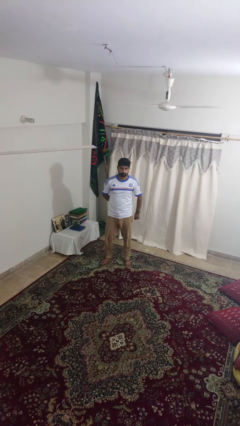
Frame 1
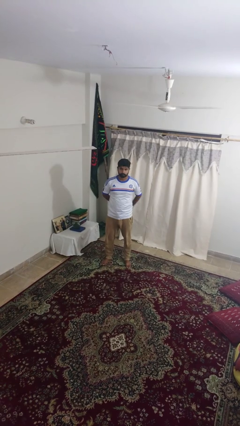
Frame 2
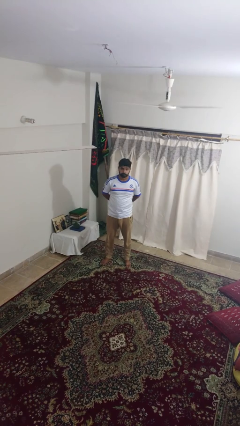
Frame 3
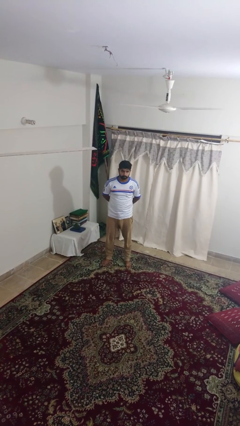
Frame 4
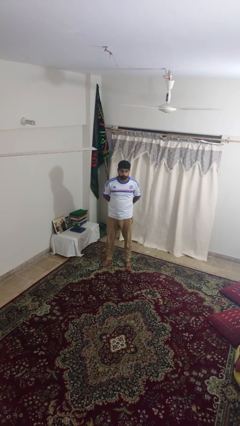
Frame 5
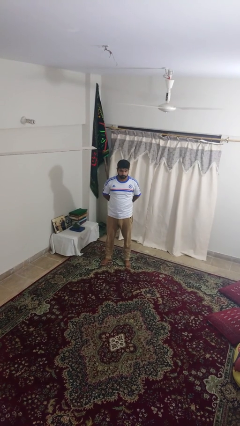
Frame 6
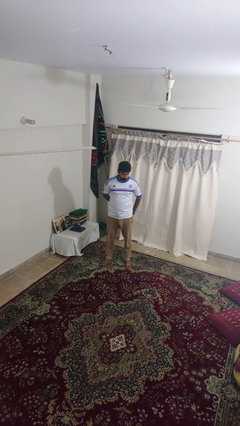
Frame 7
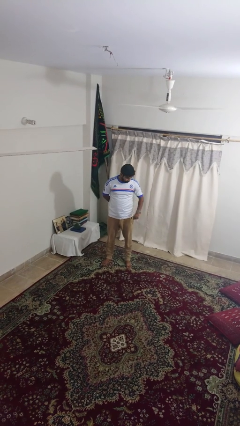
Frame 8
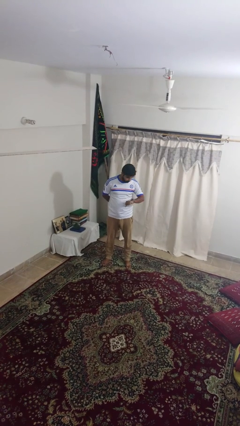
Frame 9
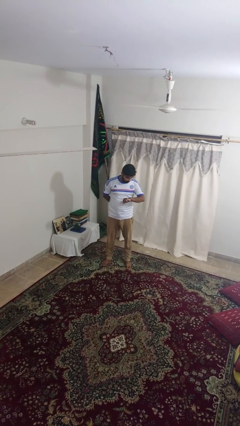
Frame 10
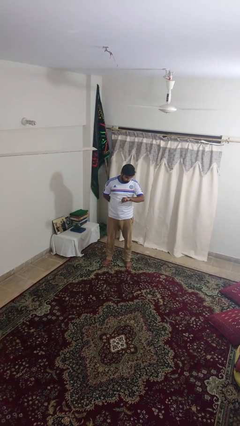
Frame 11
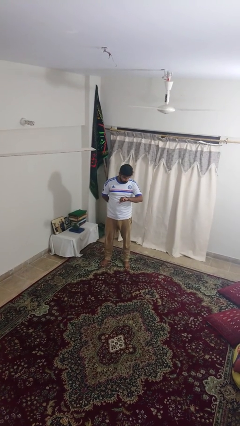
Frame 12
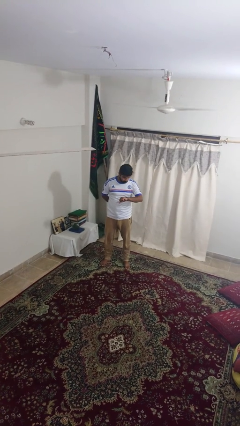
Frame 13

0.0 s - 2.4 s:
person looks at wristwatch

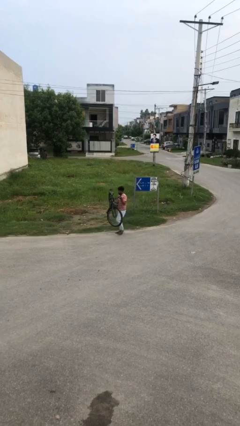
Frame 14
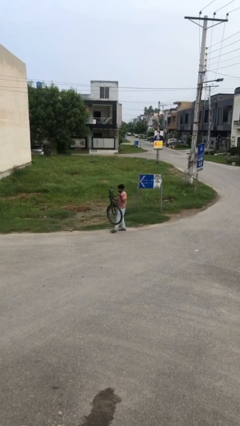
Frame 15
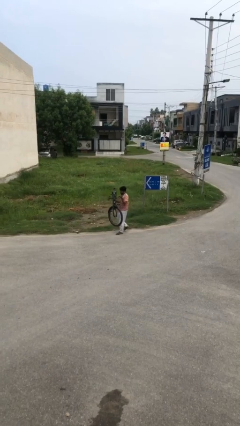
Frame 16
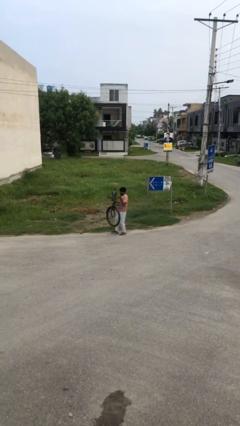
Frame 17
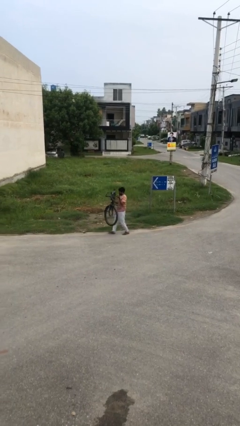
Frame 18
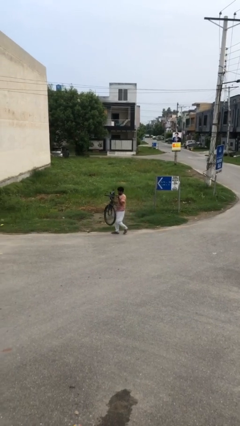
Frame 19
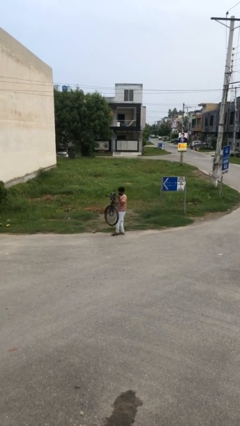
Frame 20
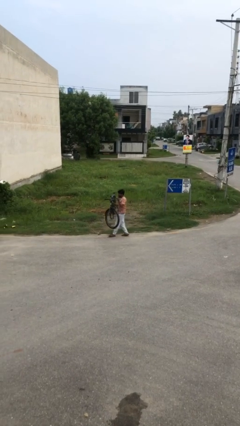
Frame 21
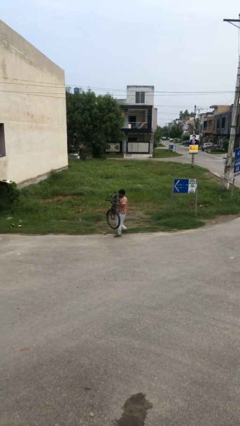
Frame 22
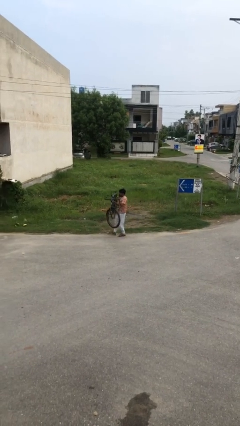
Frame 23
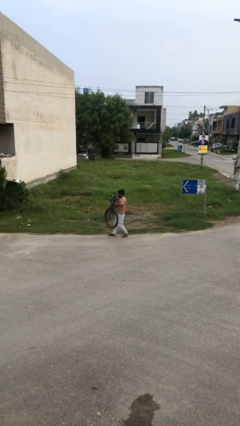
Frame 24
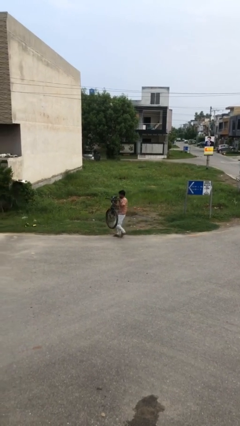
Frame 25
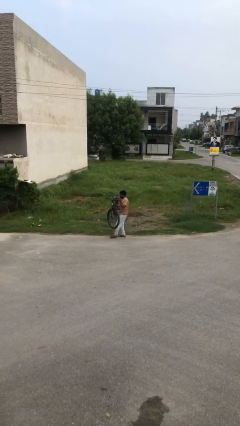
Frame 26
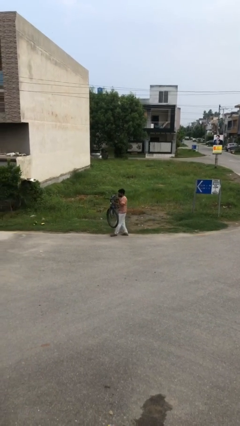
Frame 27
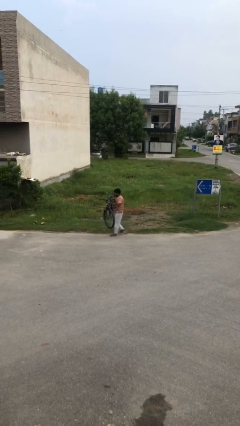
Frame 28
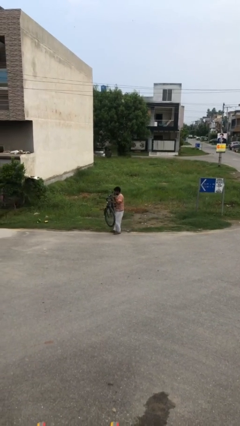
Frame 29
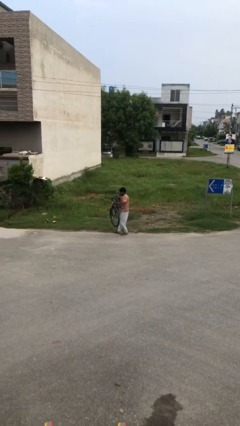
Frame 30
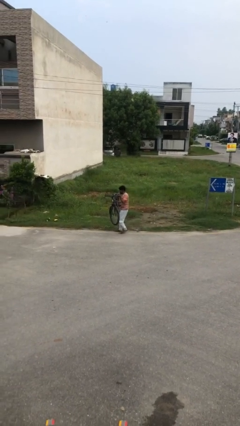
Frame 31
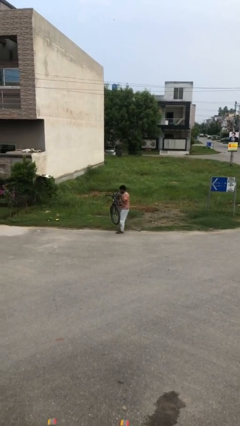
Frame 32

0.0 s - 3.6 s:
person carries heavy object

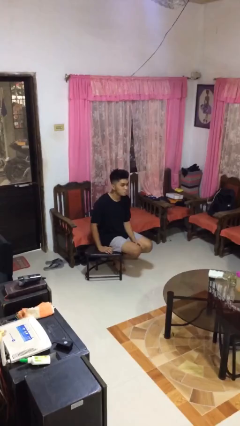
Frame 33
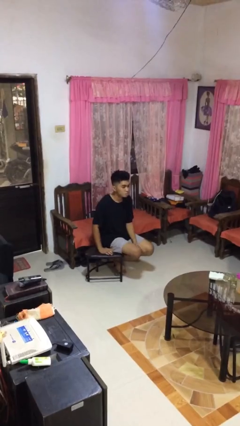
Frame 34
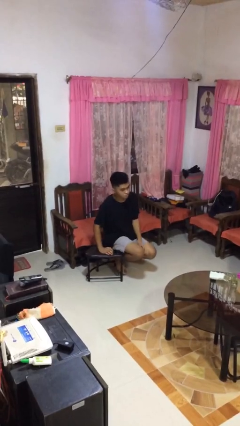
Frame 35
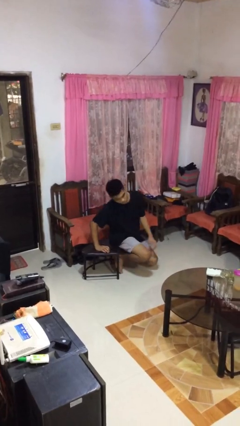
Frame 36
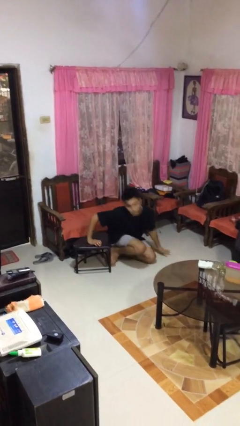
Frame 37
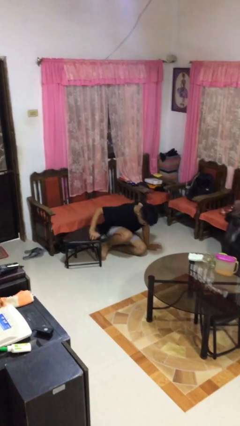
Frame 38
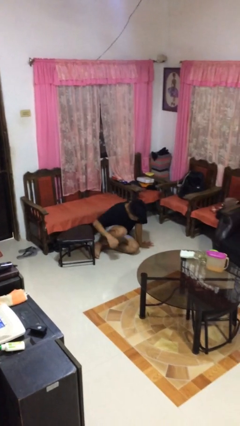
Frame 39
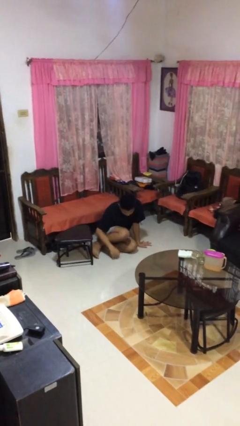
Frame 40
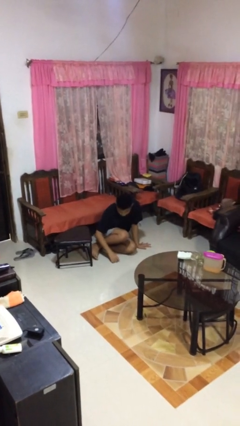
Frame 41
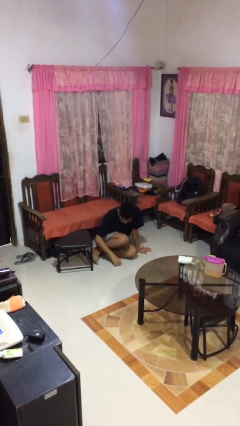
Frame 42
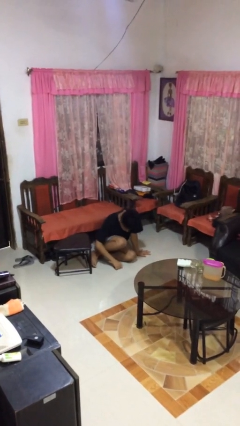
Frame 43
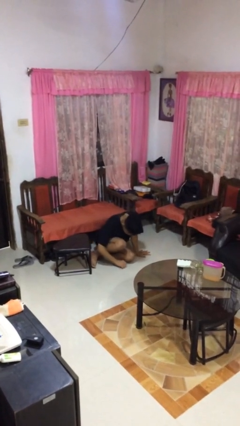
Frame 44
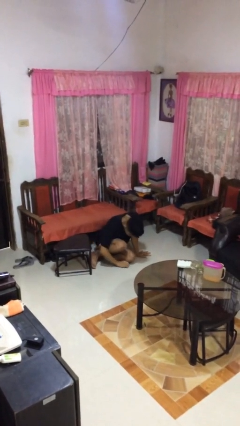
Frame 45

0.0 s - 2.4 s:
person falls from chair

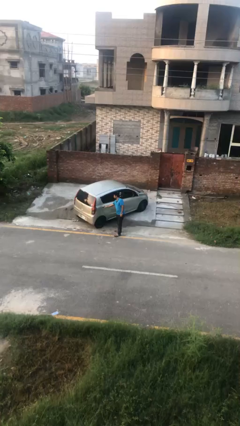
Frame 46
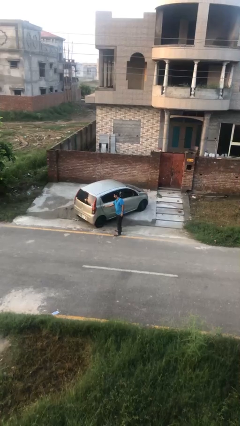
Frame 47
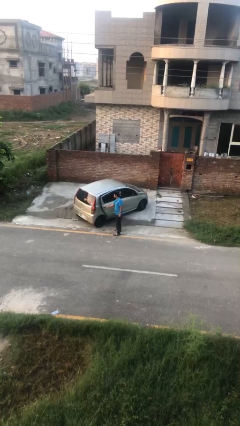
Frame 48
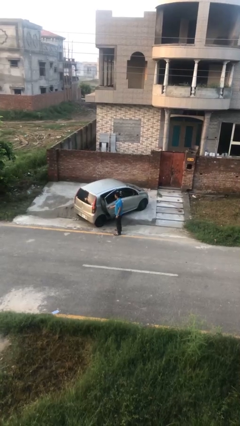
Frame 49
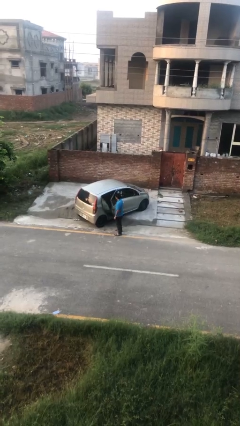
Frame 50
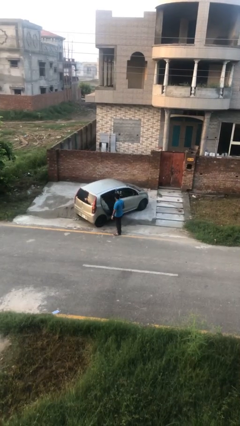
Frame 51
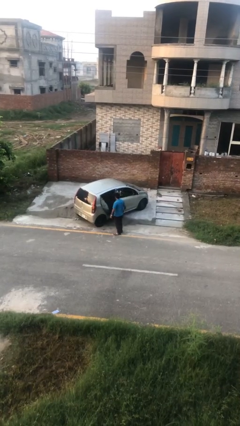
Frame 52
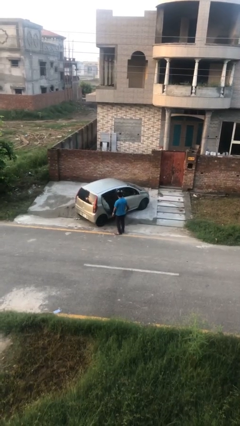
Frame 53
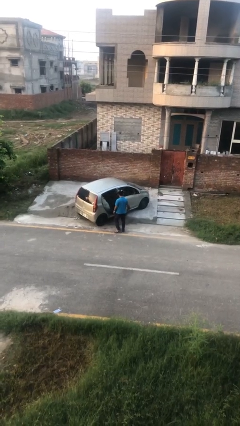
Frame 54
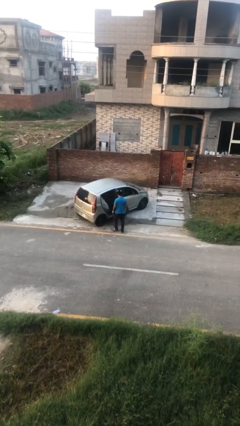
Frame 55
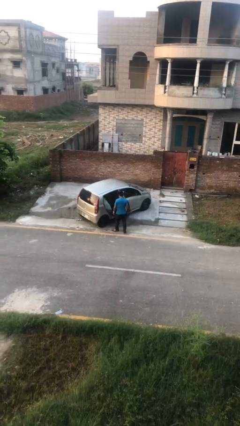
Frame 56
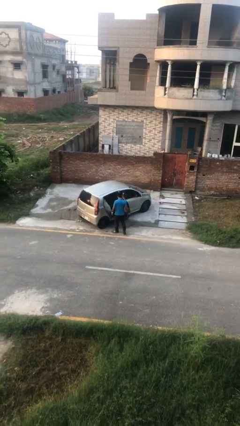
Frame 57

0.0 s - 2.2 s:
person opens car door

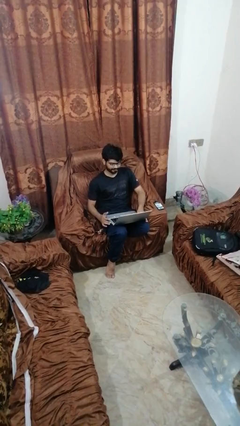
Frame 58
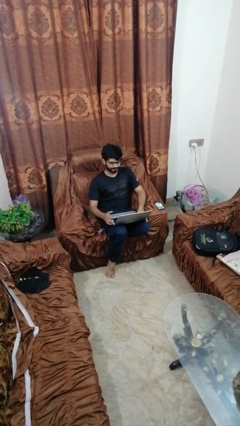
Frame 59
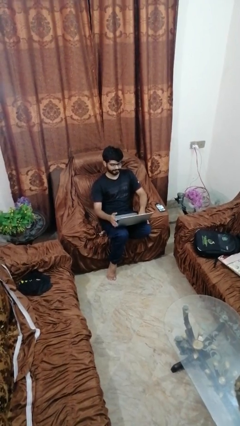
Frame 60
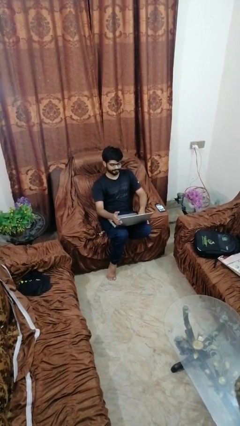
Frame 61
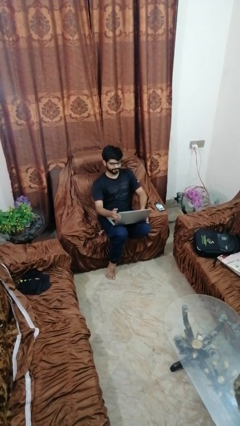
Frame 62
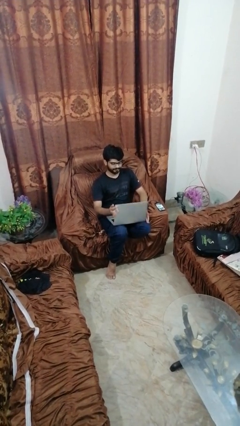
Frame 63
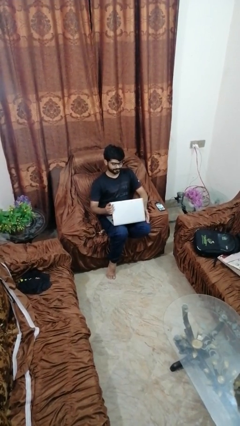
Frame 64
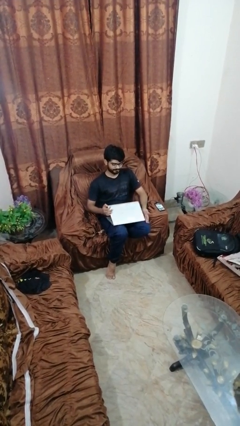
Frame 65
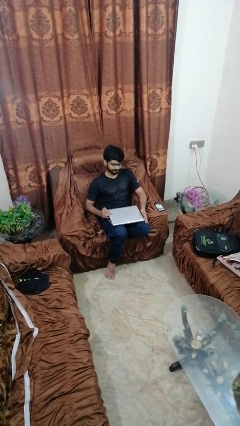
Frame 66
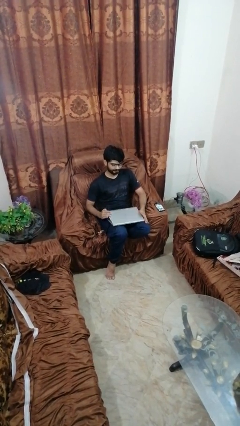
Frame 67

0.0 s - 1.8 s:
person closes laptop

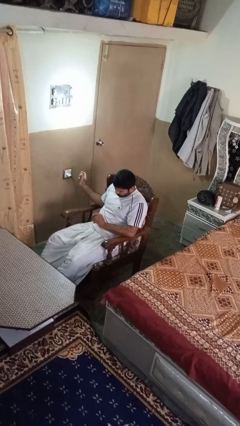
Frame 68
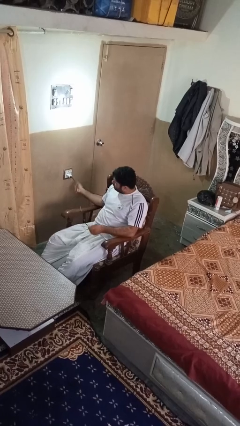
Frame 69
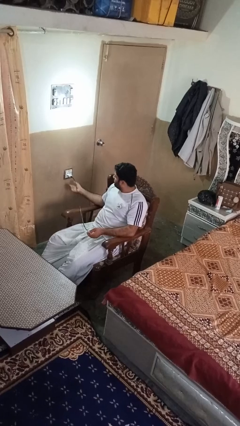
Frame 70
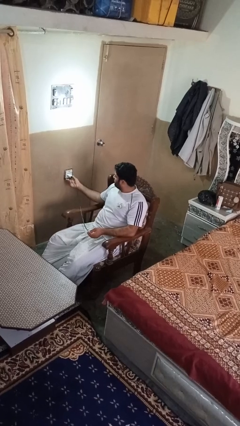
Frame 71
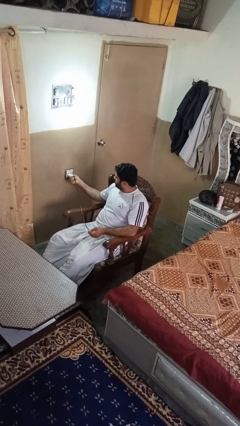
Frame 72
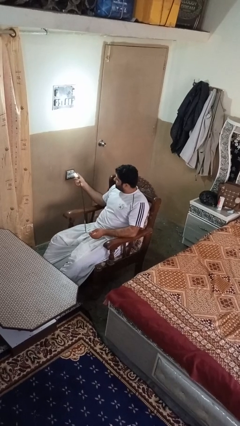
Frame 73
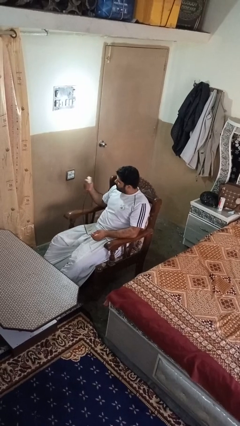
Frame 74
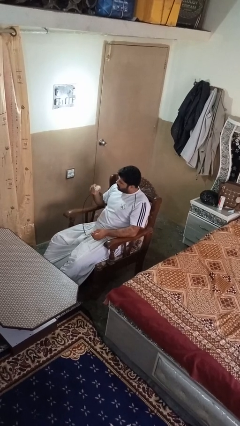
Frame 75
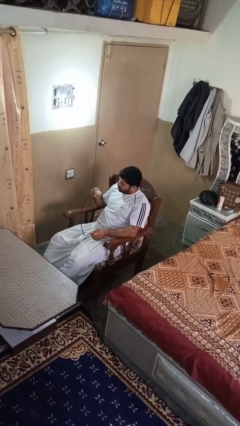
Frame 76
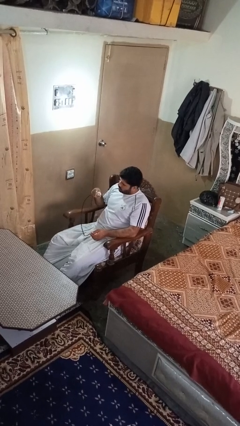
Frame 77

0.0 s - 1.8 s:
person unplugs from electrical socket

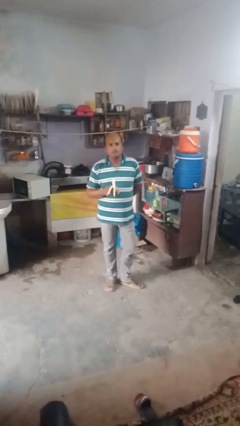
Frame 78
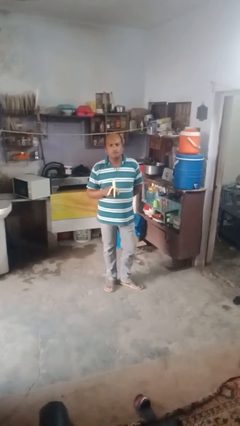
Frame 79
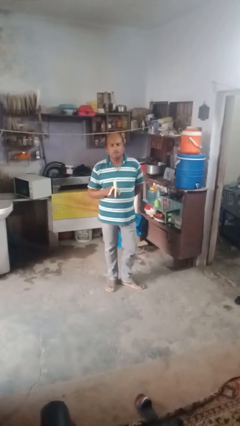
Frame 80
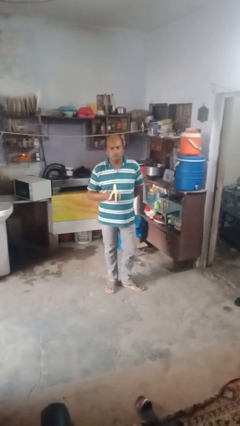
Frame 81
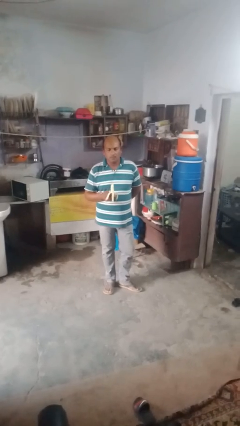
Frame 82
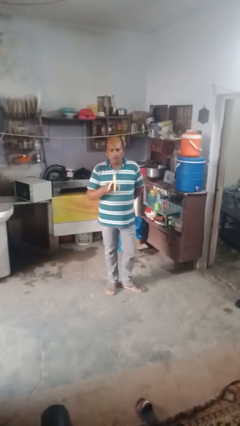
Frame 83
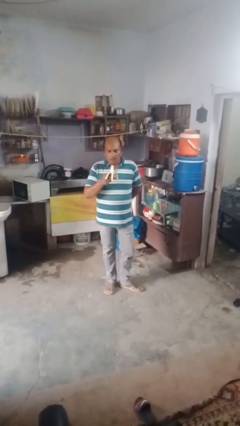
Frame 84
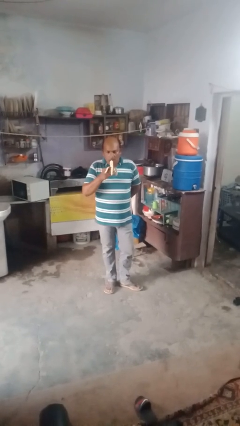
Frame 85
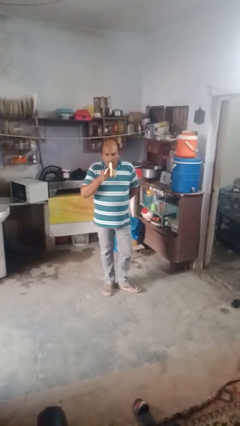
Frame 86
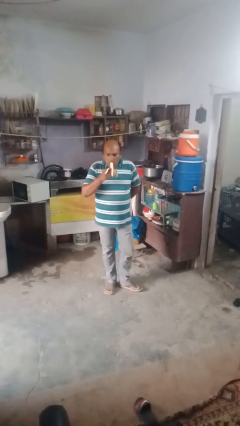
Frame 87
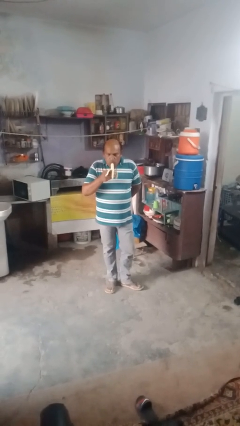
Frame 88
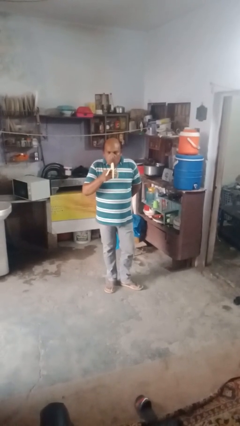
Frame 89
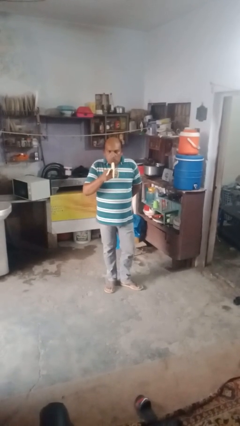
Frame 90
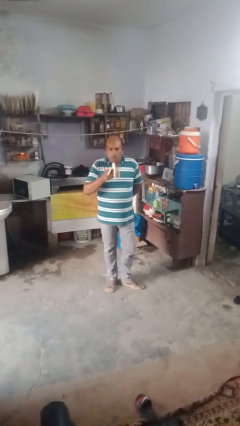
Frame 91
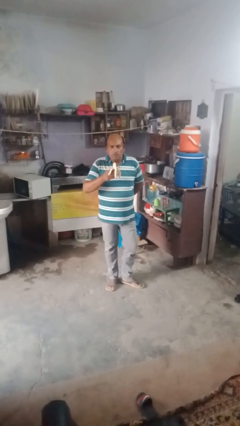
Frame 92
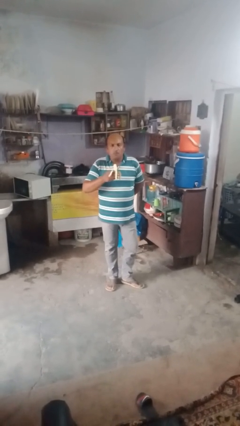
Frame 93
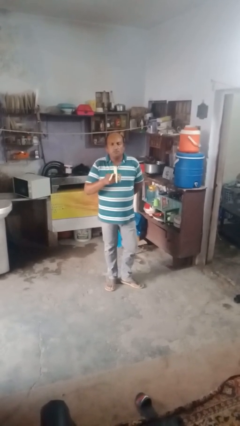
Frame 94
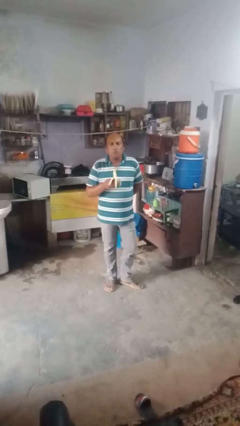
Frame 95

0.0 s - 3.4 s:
person eats banana
